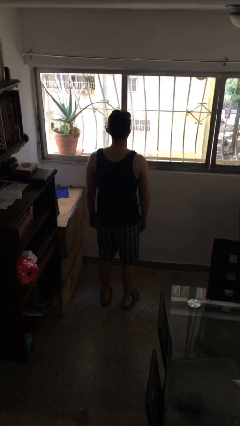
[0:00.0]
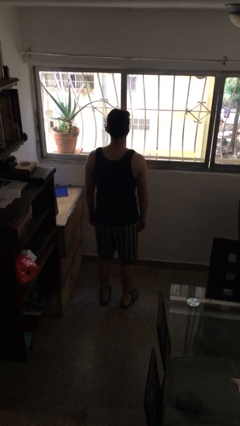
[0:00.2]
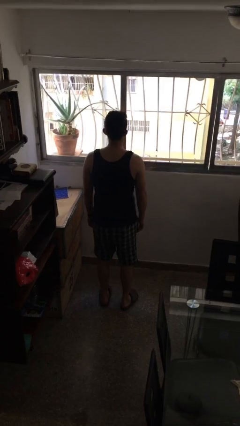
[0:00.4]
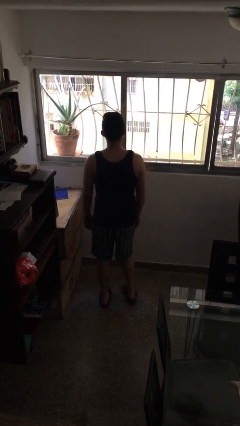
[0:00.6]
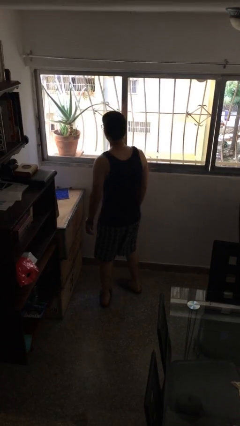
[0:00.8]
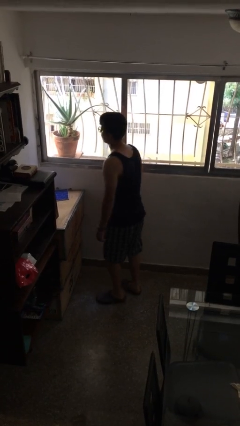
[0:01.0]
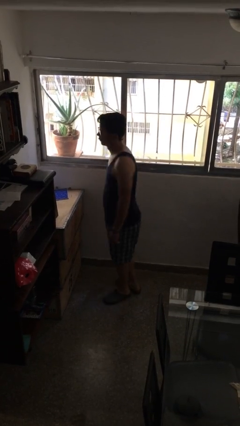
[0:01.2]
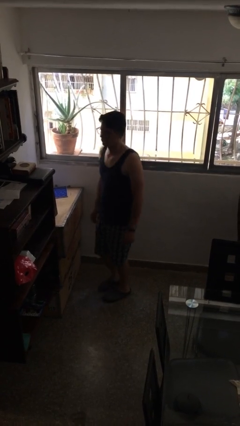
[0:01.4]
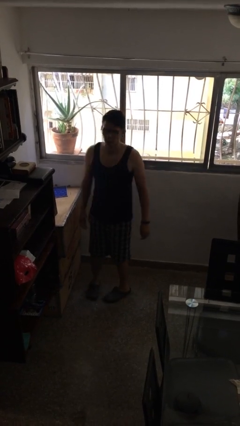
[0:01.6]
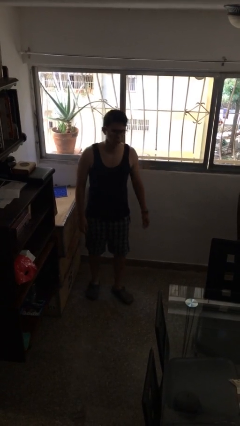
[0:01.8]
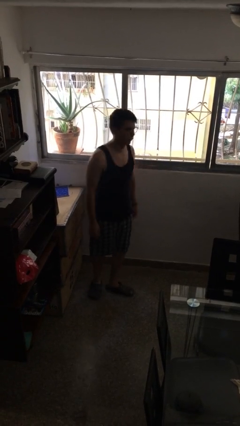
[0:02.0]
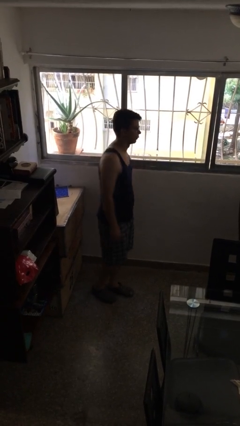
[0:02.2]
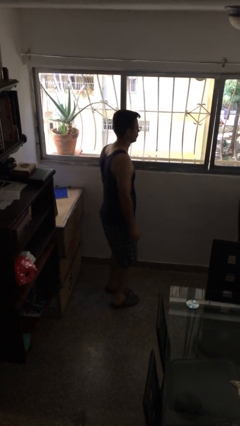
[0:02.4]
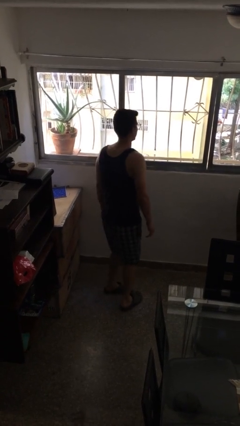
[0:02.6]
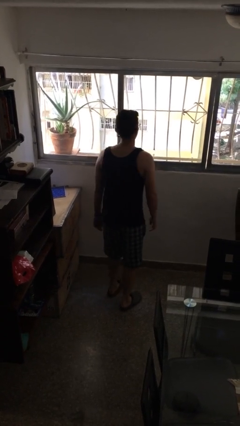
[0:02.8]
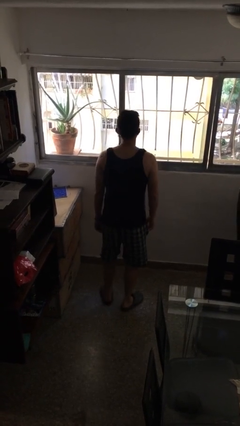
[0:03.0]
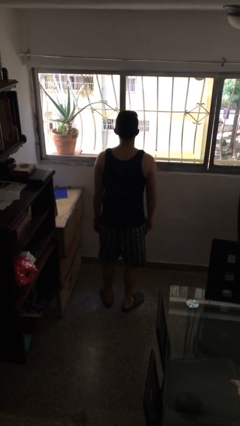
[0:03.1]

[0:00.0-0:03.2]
person twirls

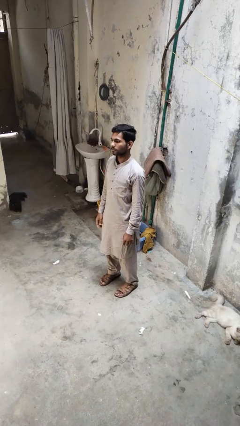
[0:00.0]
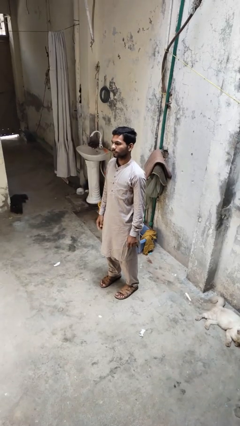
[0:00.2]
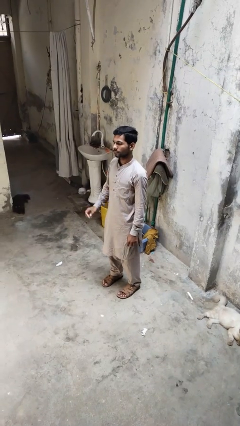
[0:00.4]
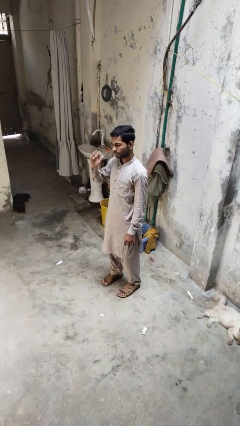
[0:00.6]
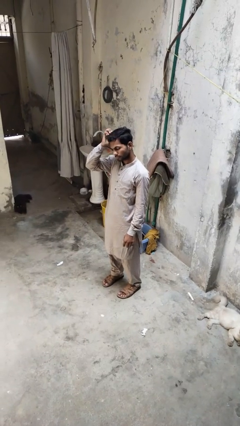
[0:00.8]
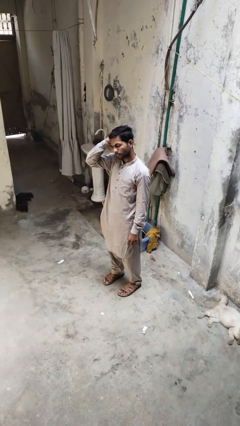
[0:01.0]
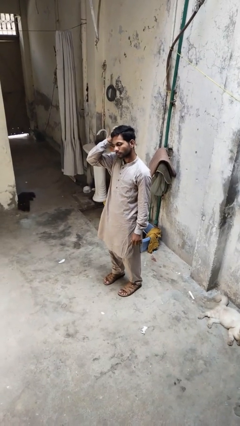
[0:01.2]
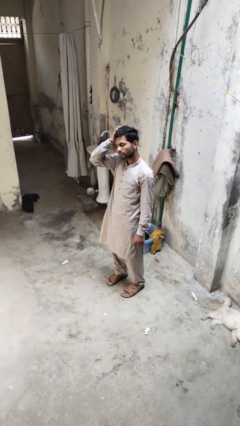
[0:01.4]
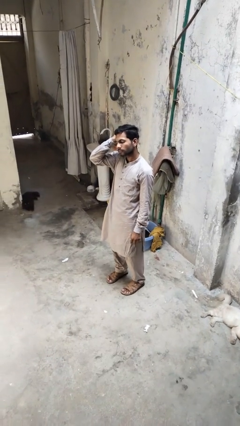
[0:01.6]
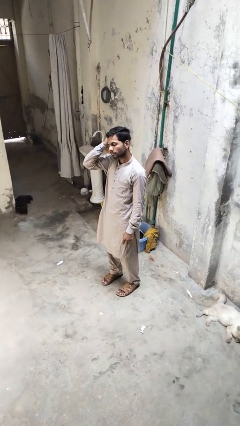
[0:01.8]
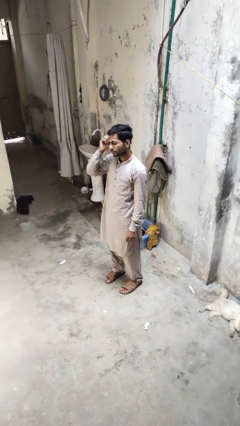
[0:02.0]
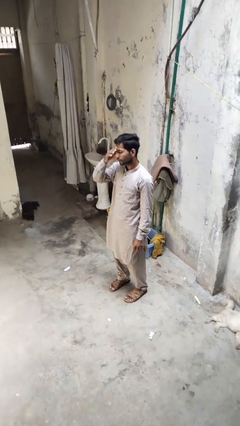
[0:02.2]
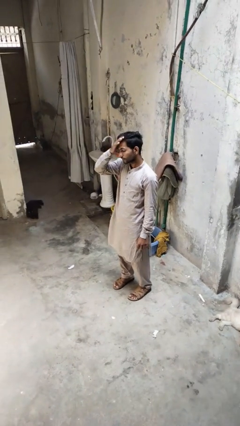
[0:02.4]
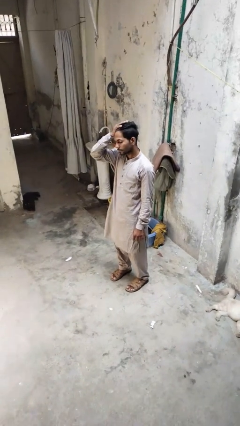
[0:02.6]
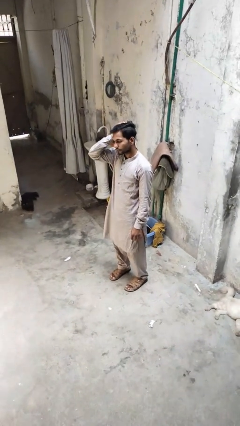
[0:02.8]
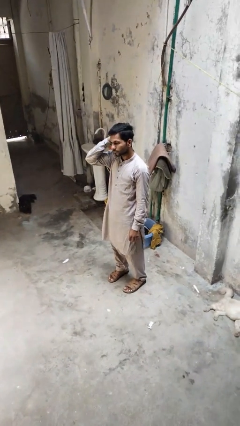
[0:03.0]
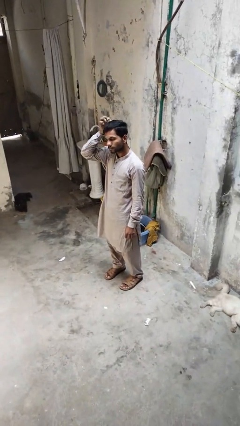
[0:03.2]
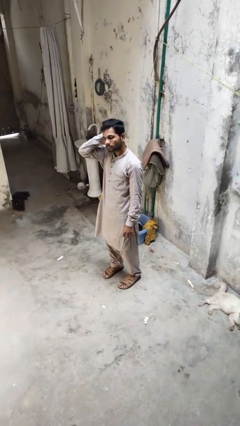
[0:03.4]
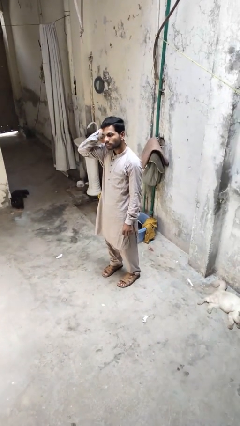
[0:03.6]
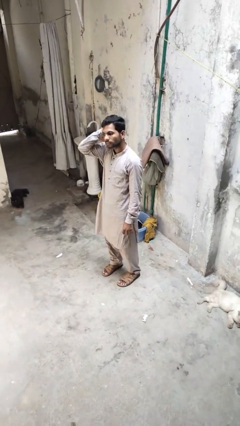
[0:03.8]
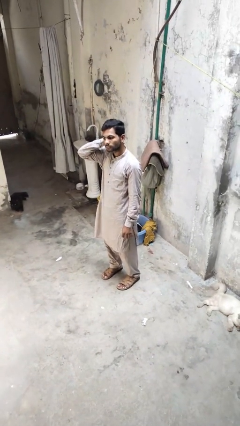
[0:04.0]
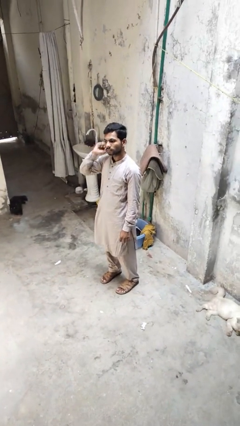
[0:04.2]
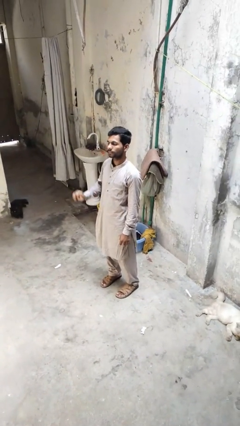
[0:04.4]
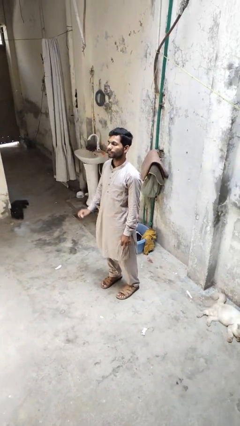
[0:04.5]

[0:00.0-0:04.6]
person scratches face

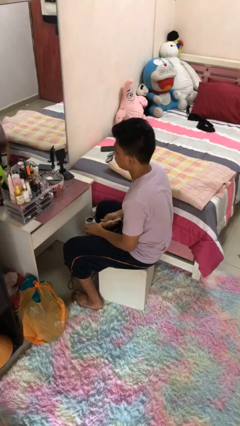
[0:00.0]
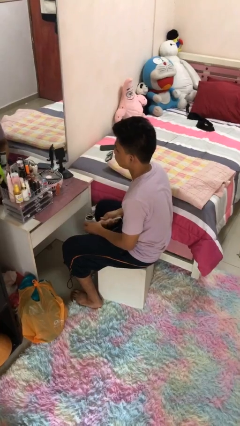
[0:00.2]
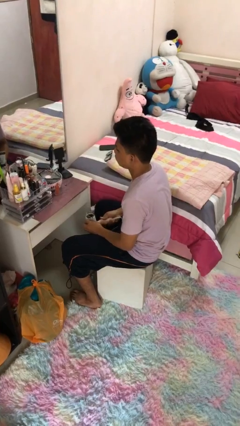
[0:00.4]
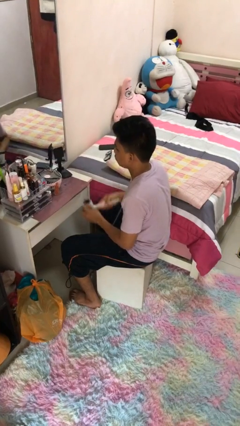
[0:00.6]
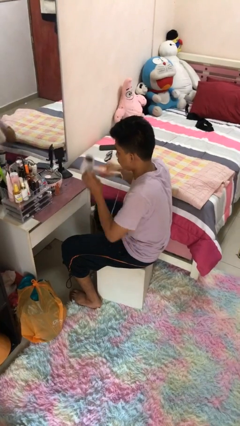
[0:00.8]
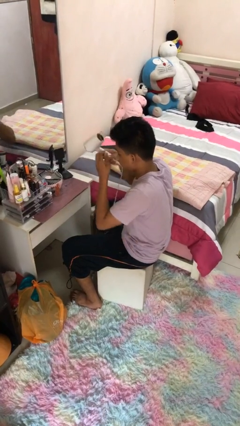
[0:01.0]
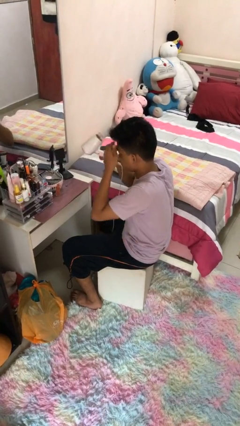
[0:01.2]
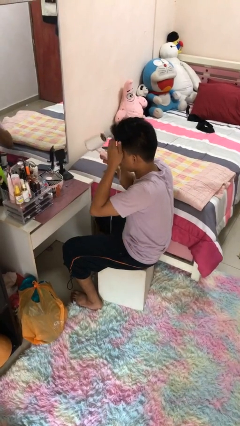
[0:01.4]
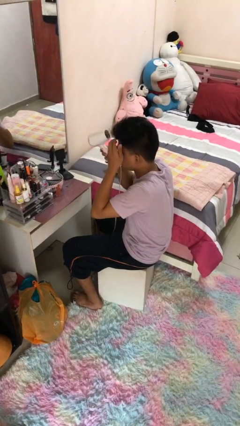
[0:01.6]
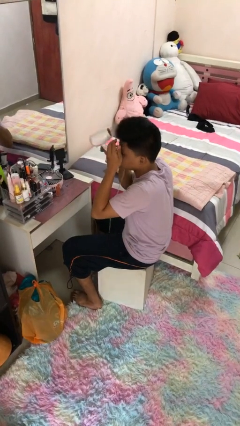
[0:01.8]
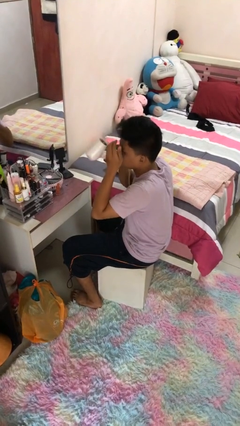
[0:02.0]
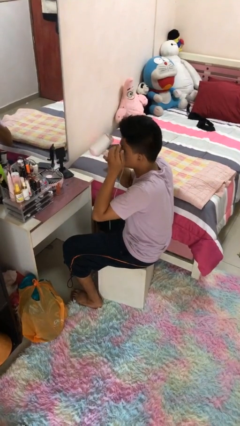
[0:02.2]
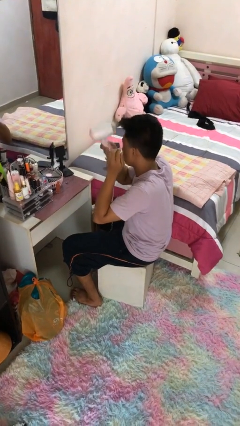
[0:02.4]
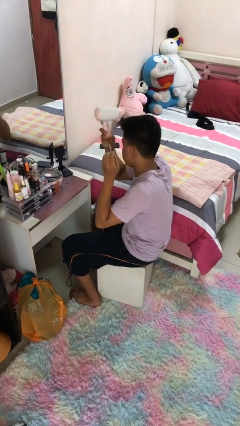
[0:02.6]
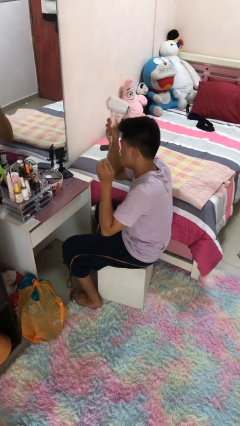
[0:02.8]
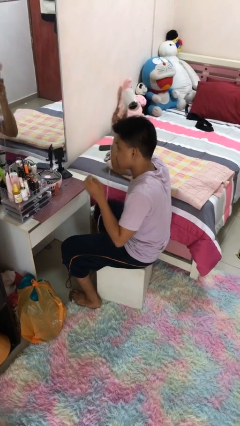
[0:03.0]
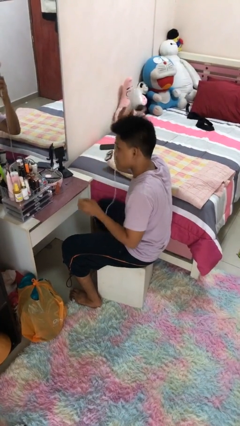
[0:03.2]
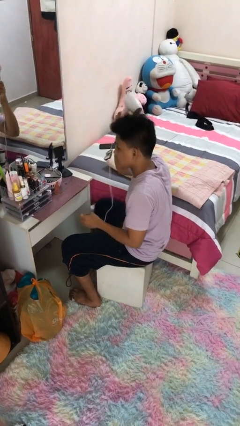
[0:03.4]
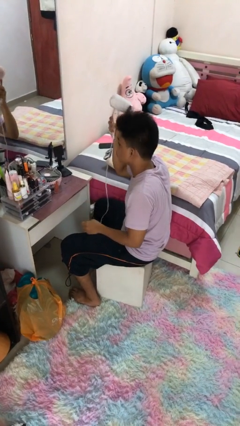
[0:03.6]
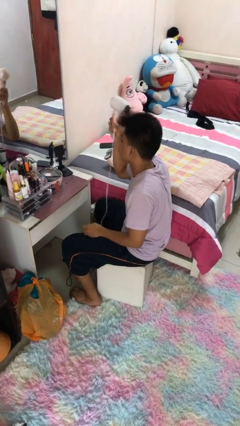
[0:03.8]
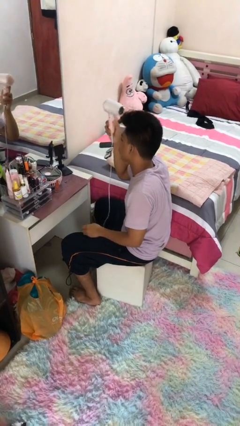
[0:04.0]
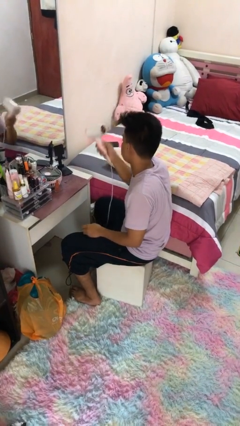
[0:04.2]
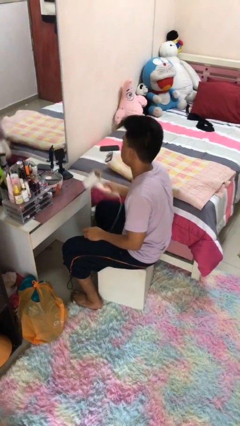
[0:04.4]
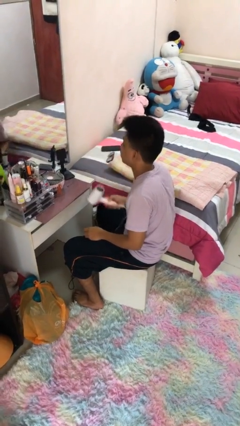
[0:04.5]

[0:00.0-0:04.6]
person dries hair with hairdryer

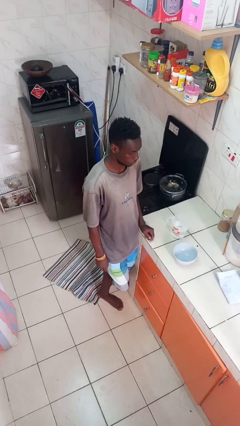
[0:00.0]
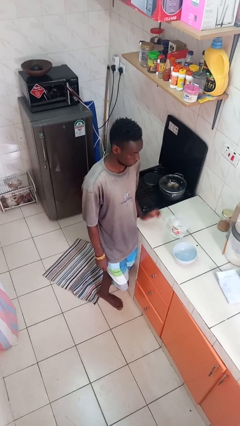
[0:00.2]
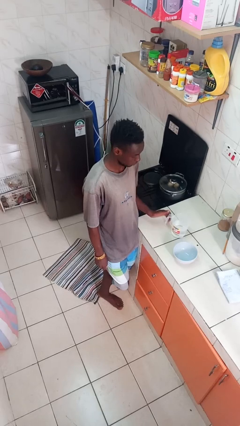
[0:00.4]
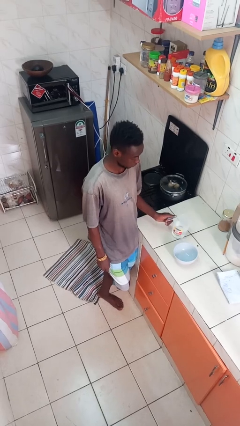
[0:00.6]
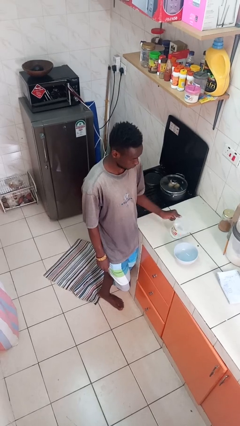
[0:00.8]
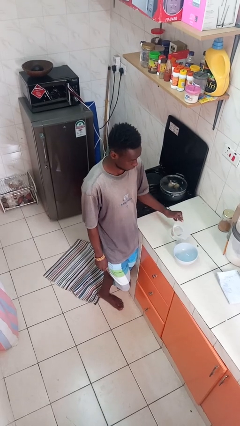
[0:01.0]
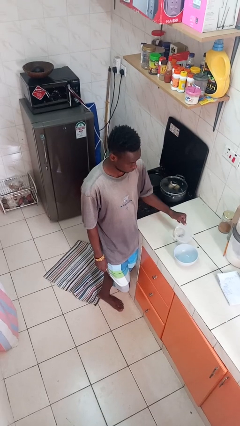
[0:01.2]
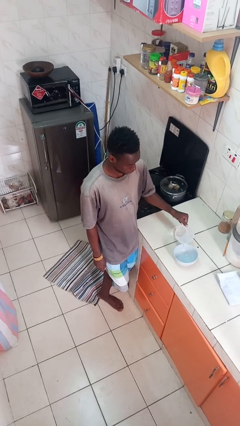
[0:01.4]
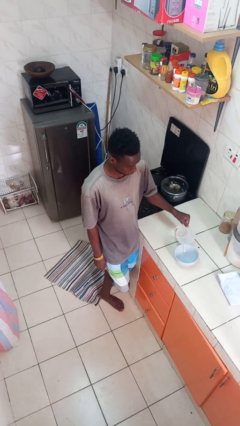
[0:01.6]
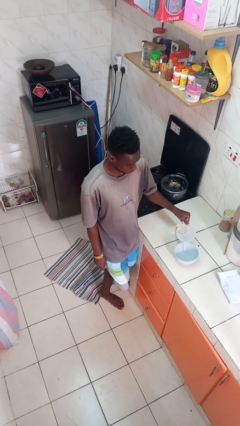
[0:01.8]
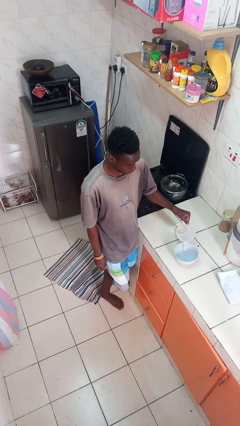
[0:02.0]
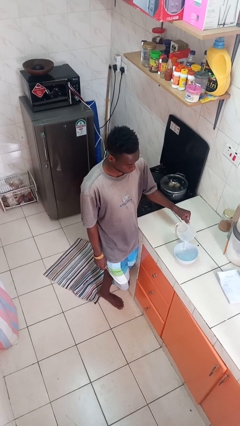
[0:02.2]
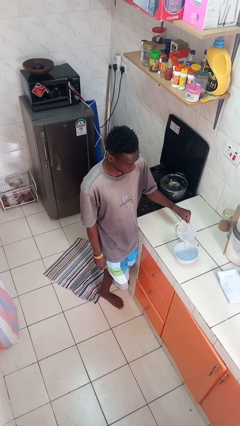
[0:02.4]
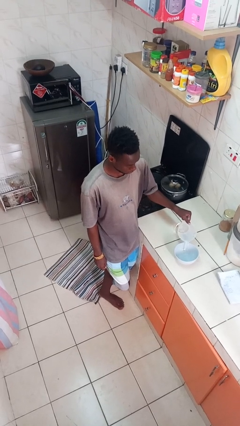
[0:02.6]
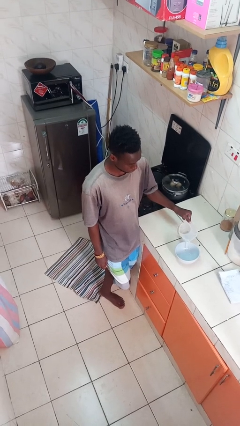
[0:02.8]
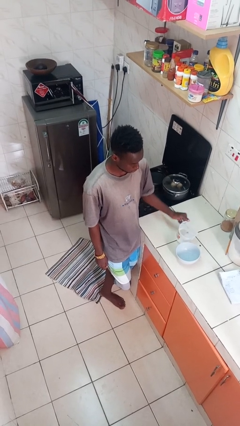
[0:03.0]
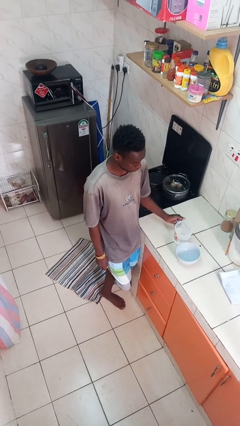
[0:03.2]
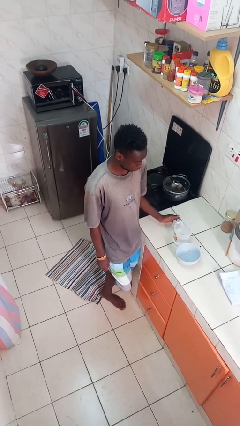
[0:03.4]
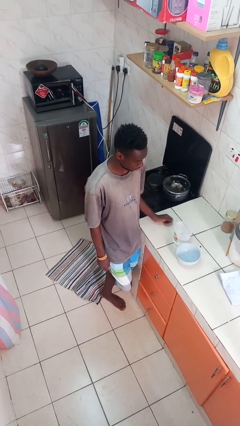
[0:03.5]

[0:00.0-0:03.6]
person pours into bowl

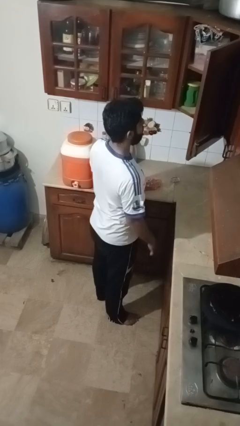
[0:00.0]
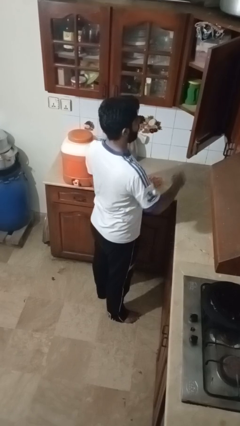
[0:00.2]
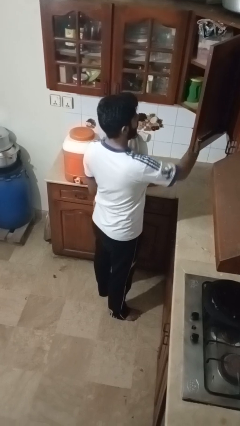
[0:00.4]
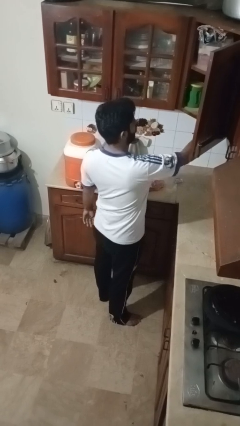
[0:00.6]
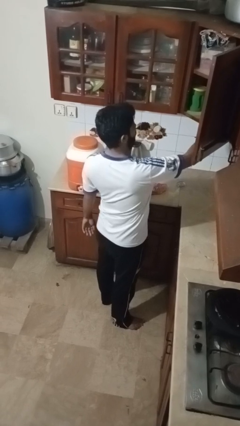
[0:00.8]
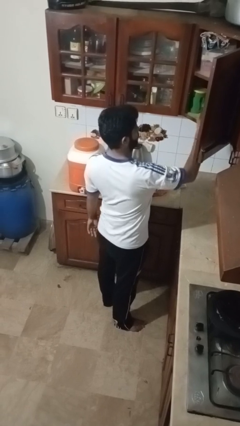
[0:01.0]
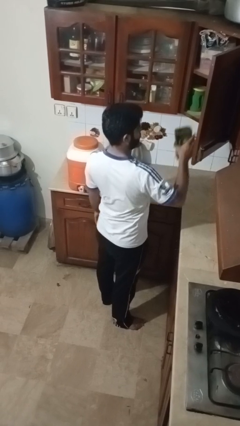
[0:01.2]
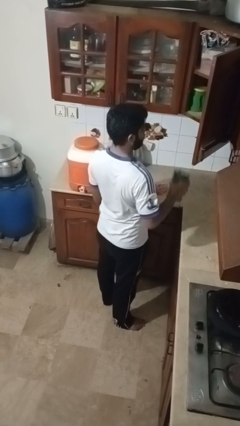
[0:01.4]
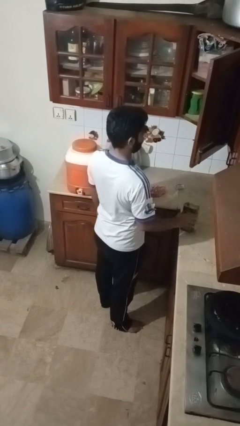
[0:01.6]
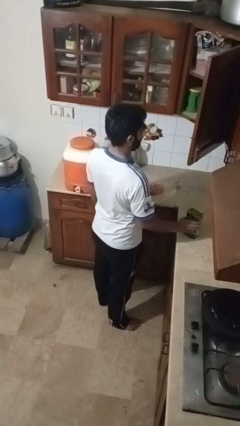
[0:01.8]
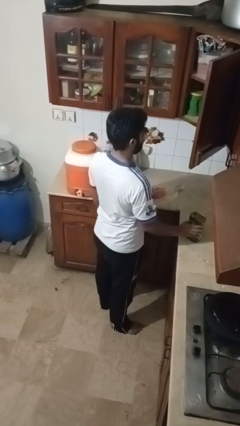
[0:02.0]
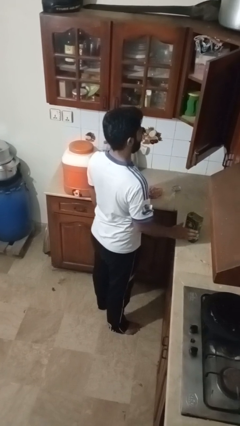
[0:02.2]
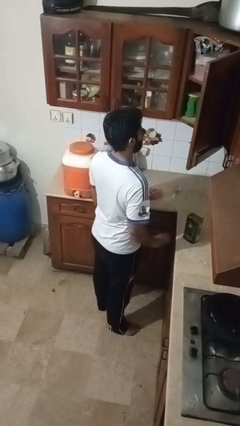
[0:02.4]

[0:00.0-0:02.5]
person takes object from cabinet
